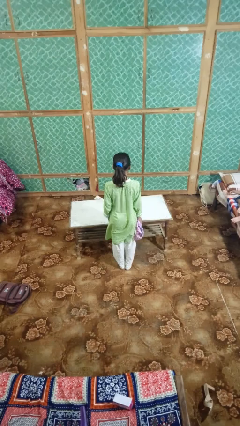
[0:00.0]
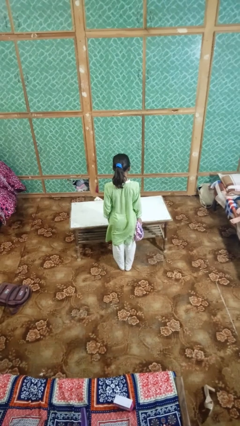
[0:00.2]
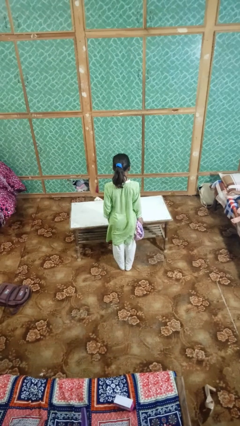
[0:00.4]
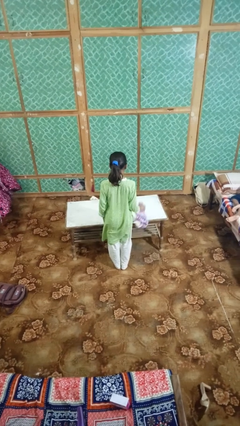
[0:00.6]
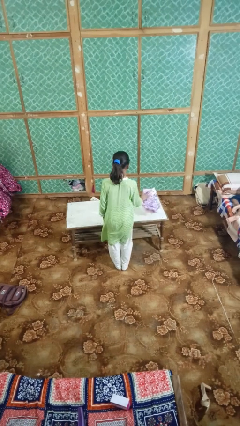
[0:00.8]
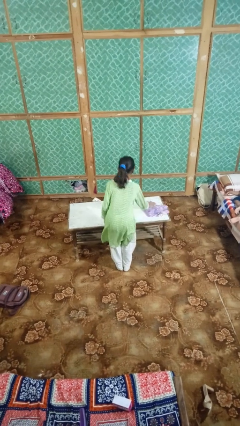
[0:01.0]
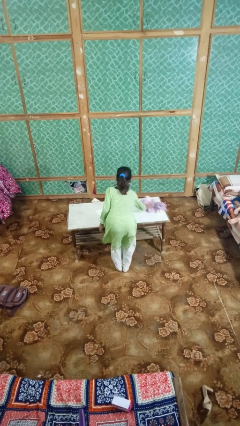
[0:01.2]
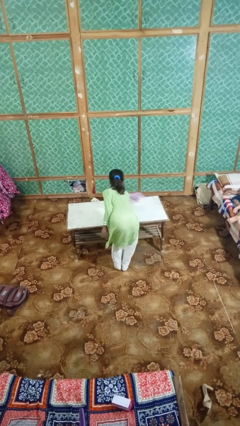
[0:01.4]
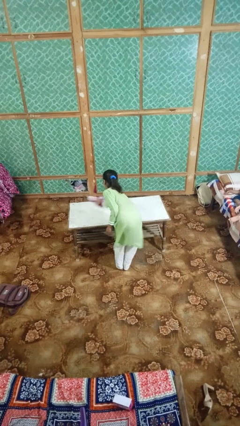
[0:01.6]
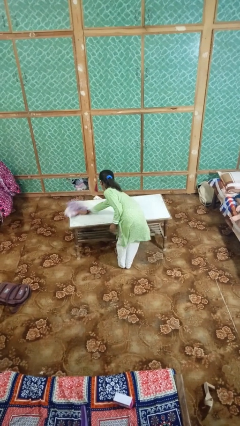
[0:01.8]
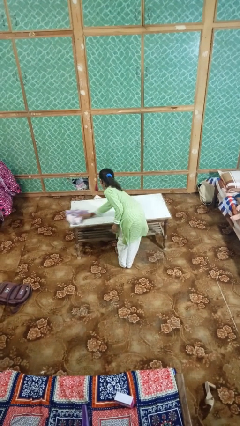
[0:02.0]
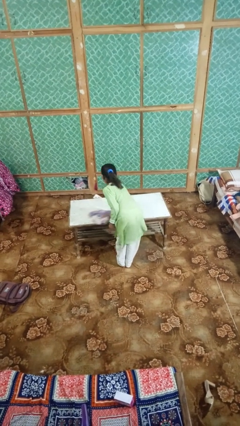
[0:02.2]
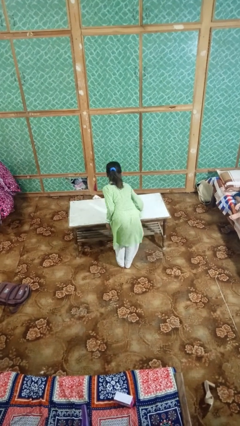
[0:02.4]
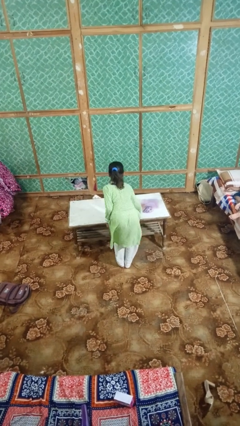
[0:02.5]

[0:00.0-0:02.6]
person cleans table with rag

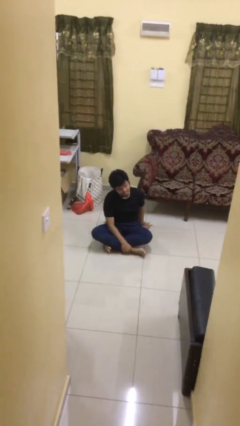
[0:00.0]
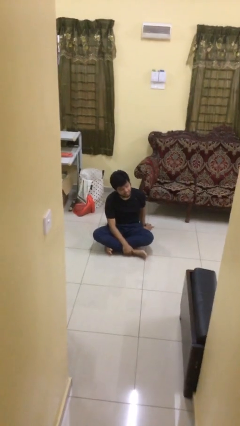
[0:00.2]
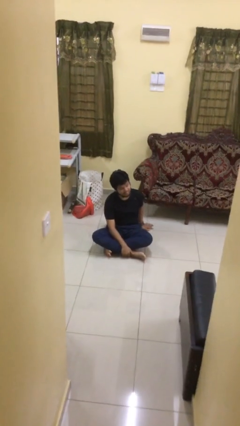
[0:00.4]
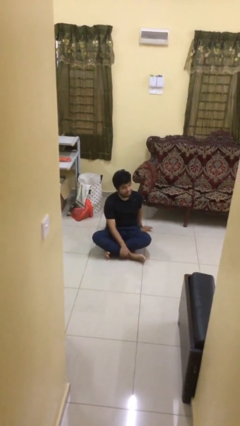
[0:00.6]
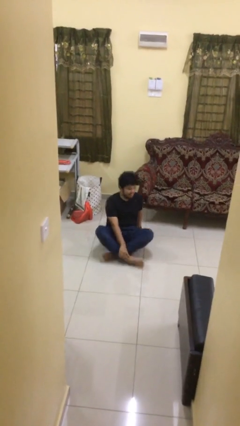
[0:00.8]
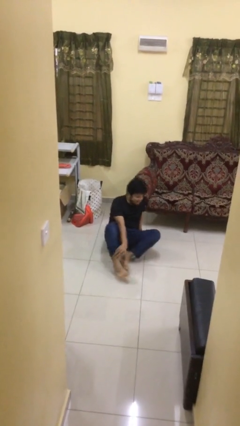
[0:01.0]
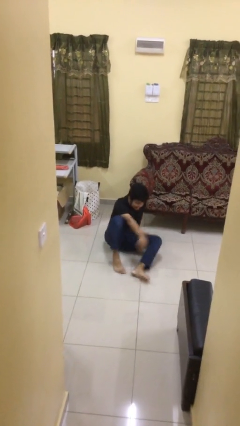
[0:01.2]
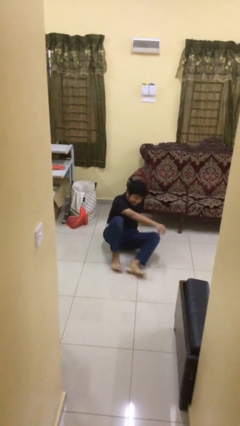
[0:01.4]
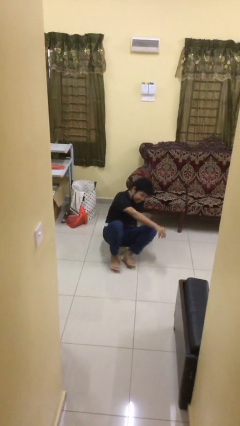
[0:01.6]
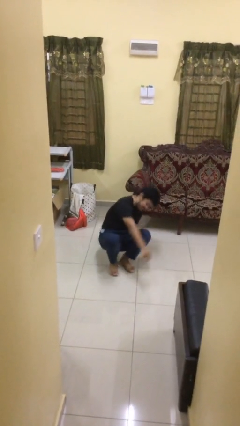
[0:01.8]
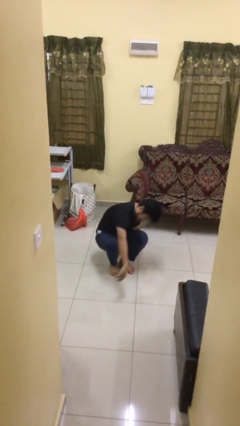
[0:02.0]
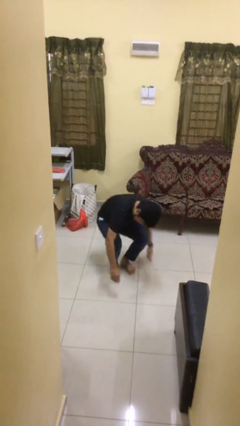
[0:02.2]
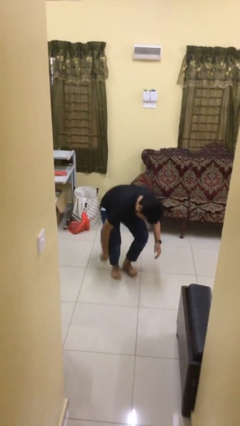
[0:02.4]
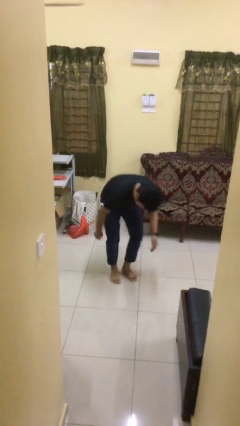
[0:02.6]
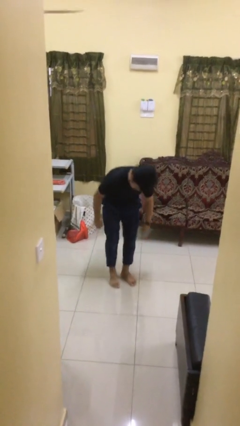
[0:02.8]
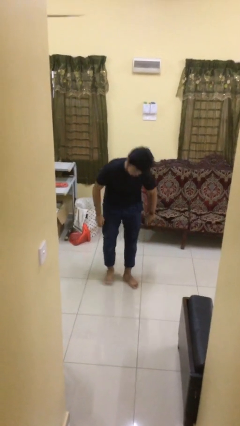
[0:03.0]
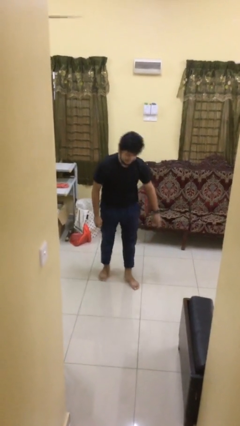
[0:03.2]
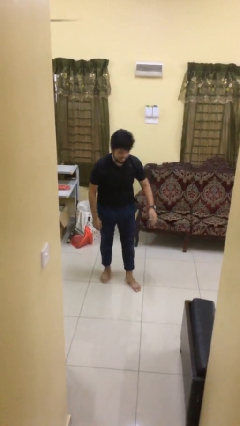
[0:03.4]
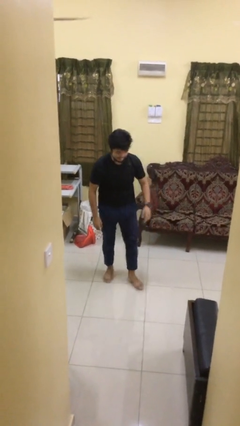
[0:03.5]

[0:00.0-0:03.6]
person stands up from floor

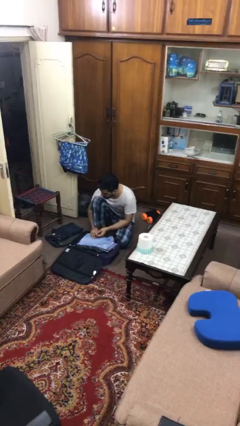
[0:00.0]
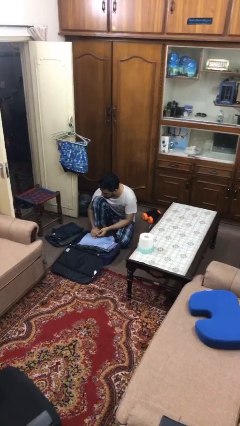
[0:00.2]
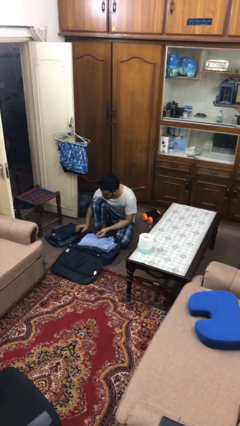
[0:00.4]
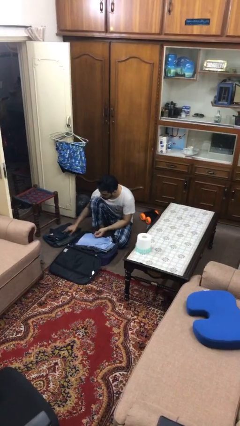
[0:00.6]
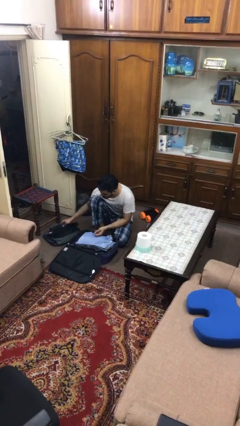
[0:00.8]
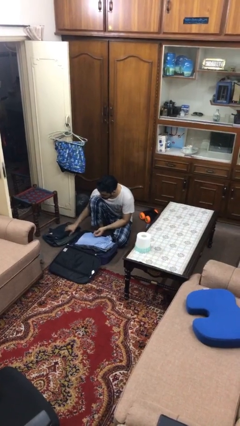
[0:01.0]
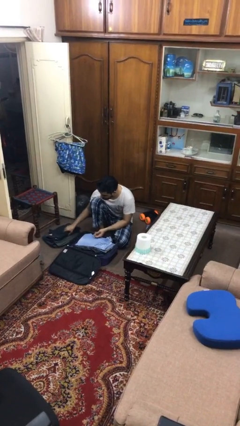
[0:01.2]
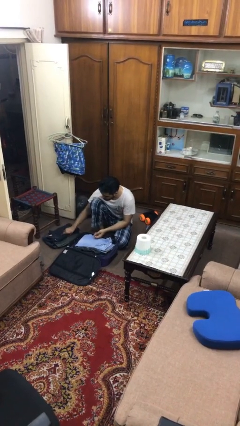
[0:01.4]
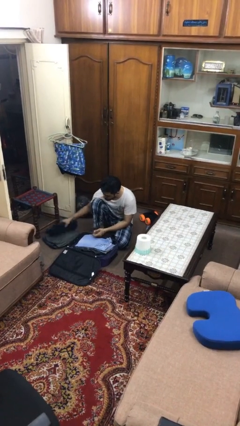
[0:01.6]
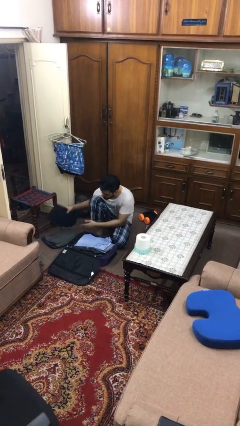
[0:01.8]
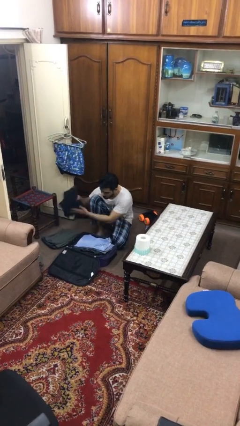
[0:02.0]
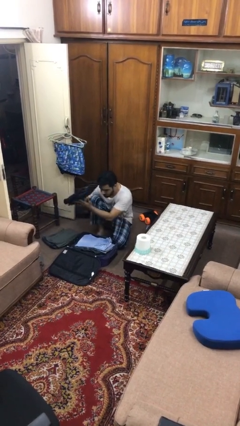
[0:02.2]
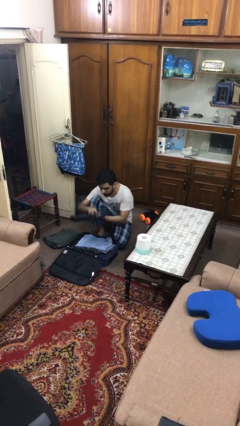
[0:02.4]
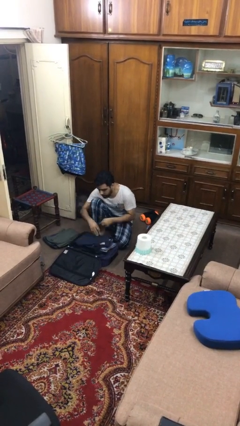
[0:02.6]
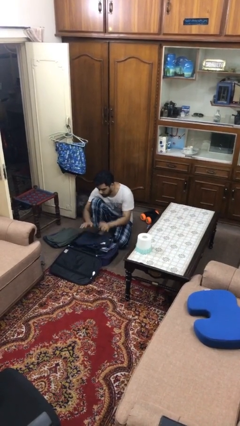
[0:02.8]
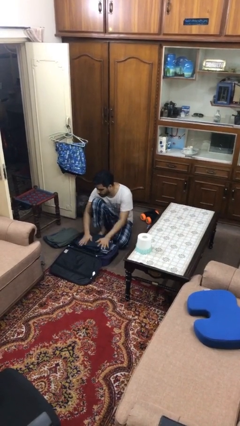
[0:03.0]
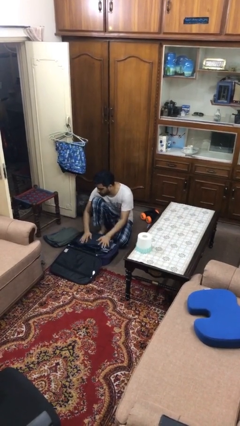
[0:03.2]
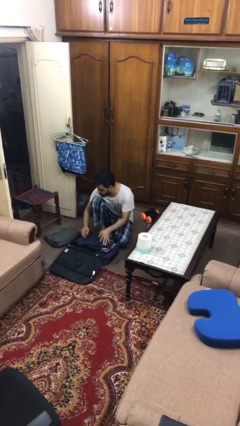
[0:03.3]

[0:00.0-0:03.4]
person loads clothes into suitcase

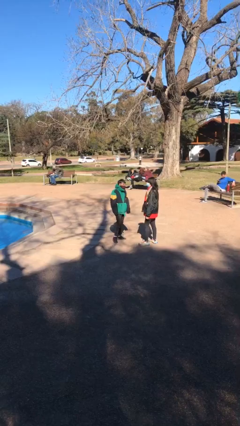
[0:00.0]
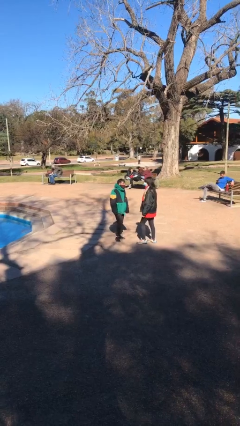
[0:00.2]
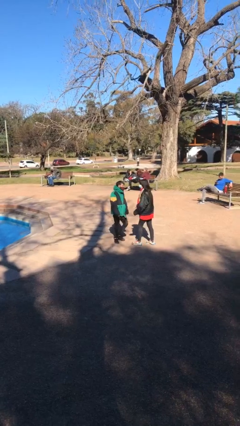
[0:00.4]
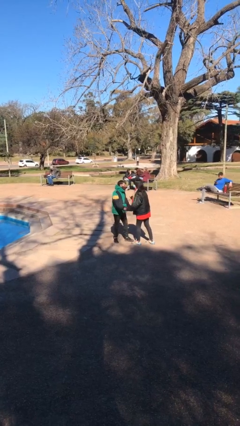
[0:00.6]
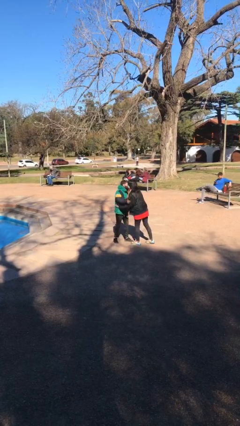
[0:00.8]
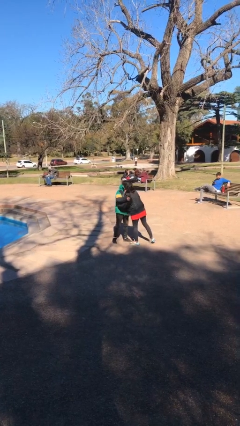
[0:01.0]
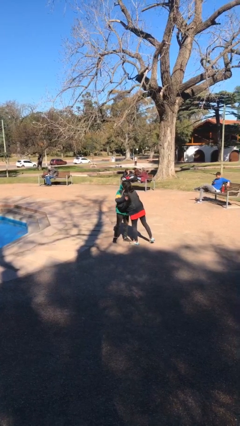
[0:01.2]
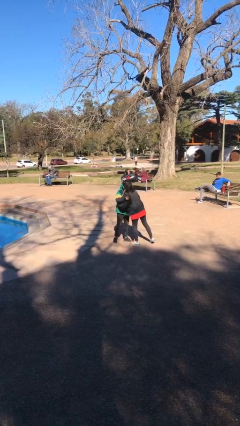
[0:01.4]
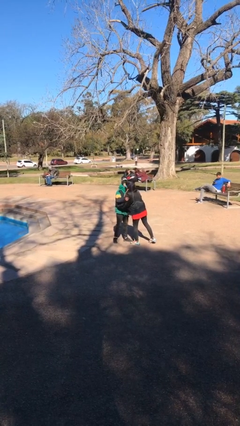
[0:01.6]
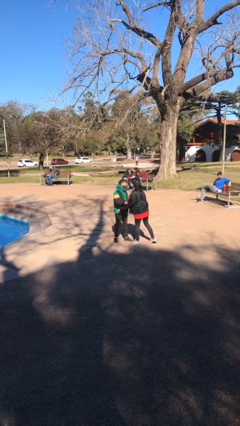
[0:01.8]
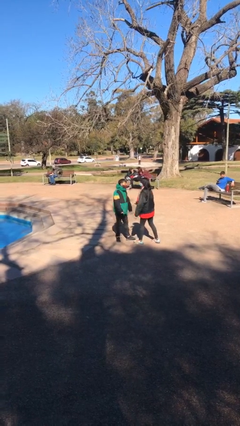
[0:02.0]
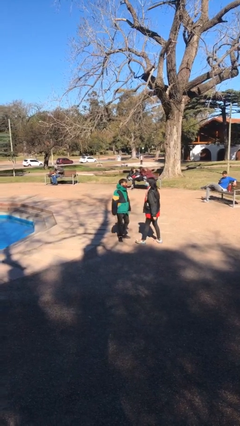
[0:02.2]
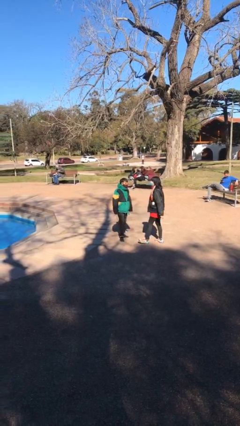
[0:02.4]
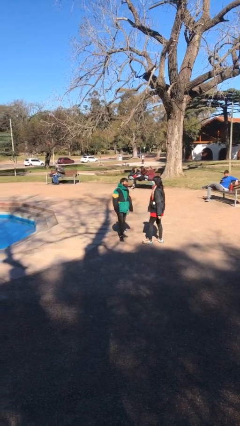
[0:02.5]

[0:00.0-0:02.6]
person kisses cheek of person

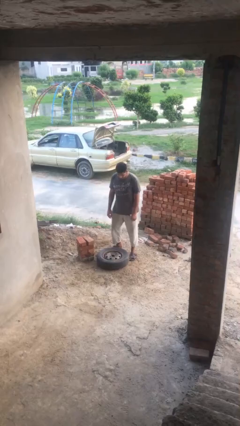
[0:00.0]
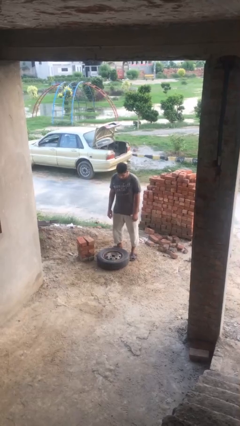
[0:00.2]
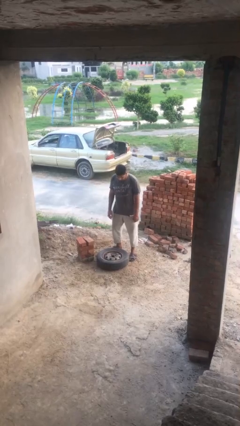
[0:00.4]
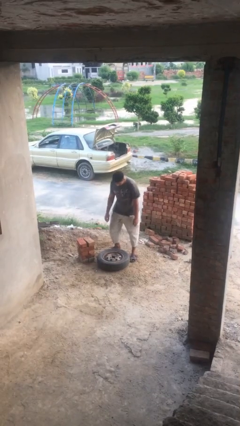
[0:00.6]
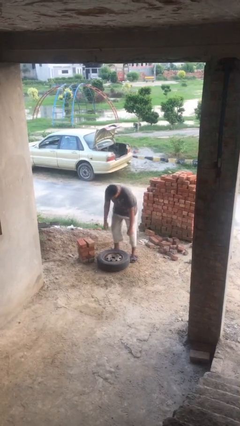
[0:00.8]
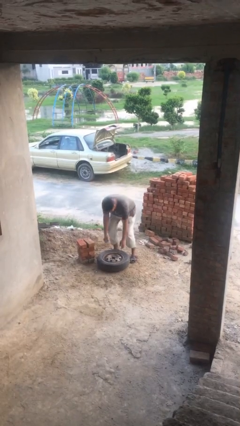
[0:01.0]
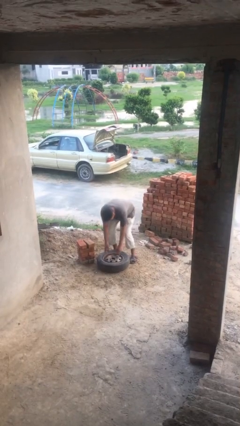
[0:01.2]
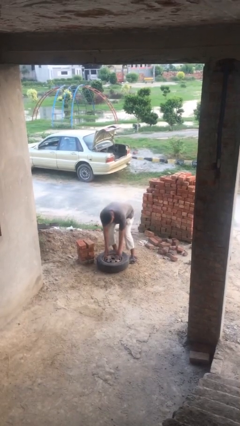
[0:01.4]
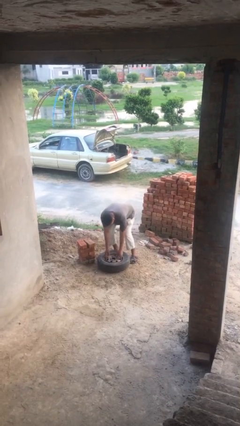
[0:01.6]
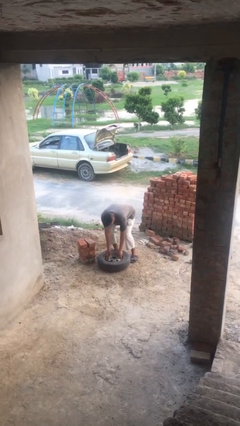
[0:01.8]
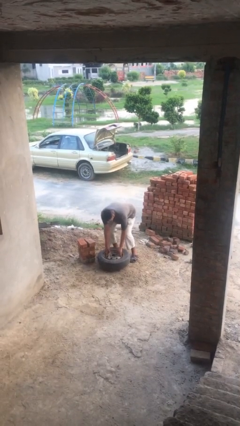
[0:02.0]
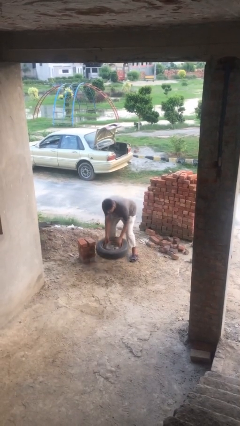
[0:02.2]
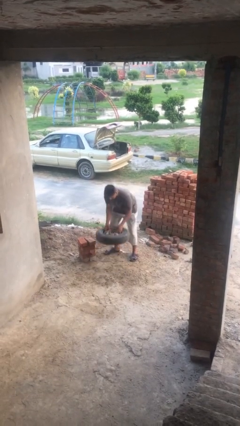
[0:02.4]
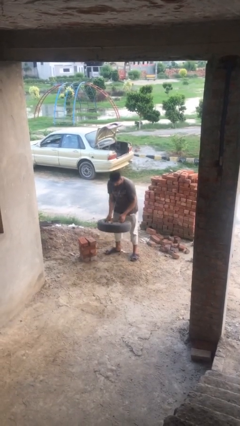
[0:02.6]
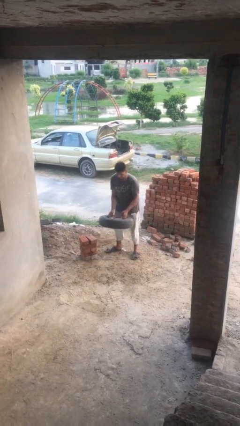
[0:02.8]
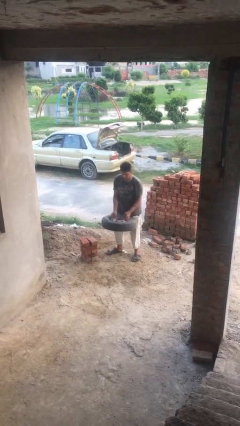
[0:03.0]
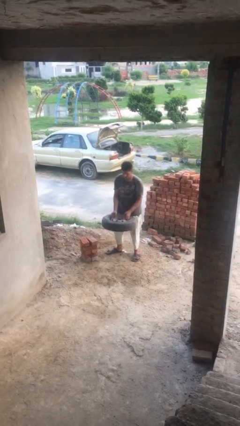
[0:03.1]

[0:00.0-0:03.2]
person picks up object from floor

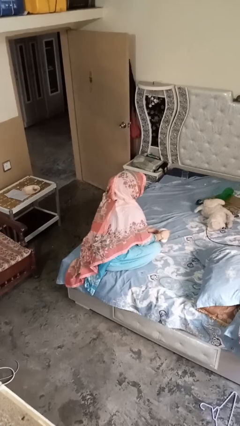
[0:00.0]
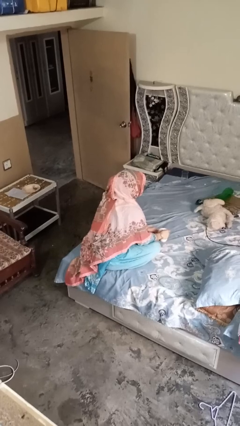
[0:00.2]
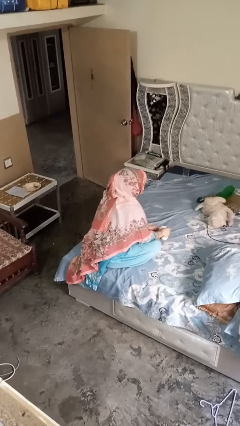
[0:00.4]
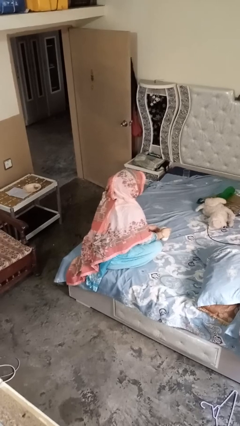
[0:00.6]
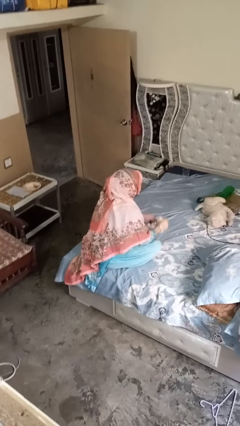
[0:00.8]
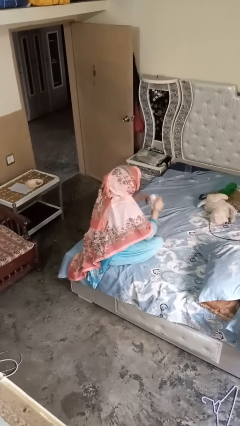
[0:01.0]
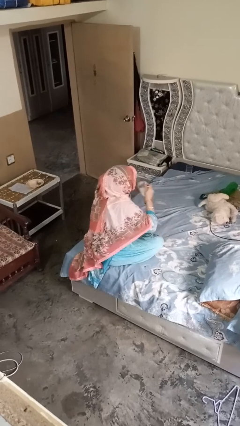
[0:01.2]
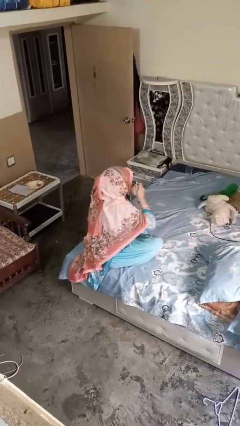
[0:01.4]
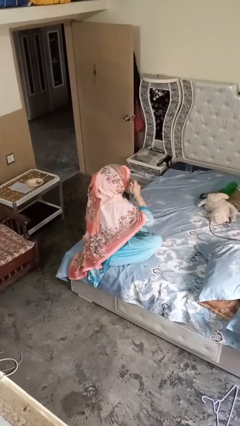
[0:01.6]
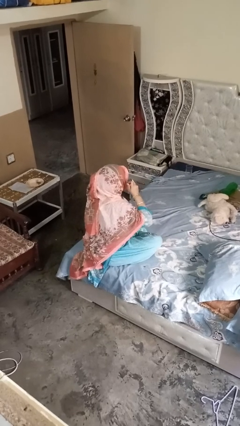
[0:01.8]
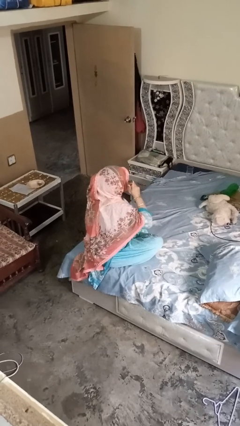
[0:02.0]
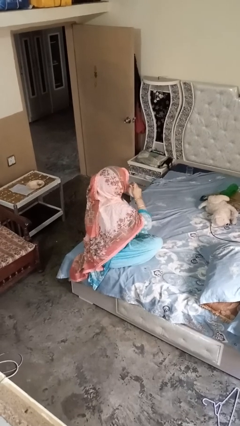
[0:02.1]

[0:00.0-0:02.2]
person drinks from mug
